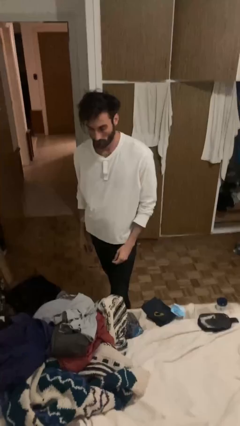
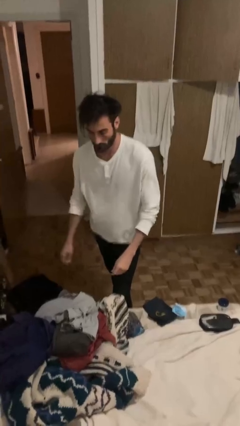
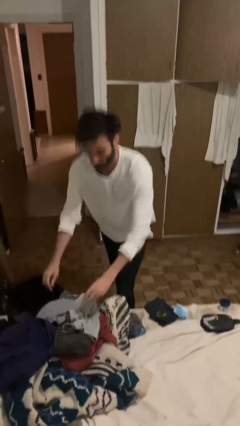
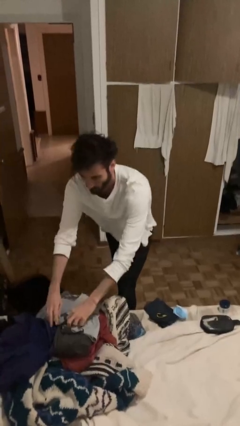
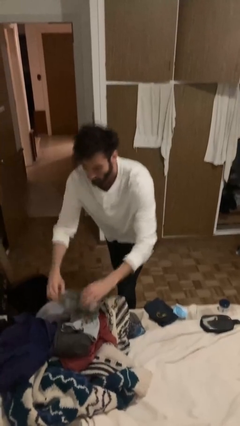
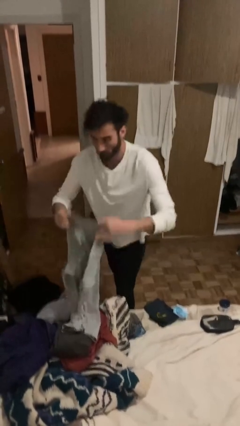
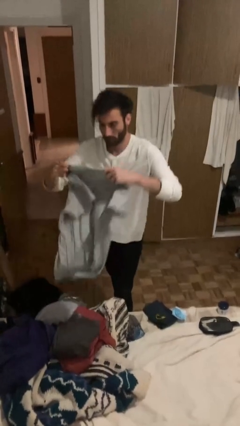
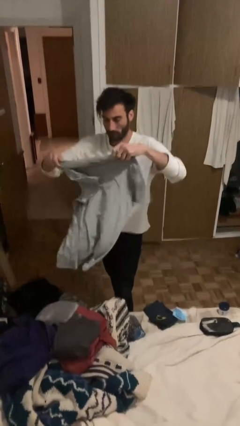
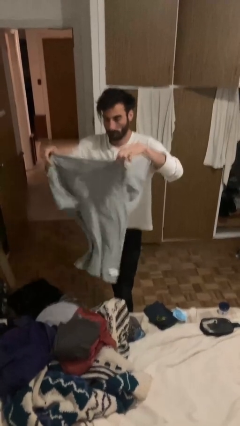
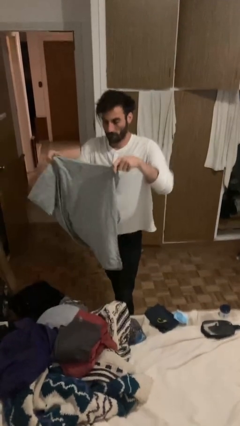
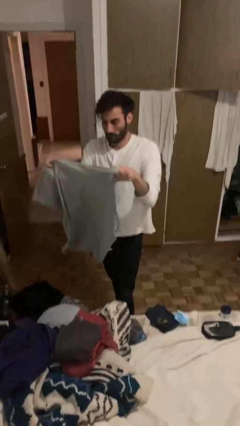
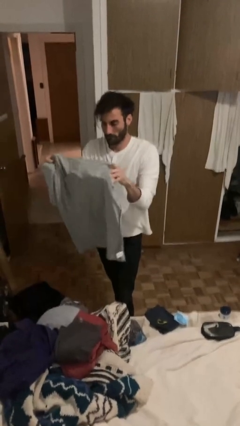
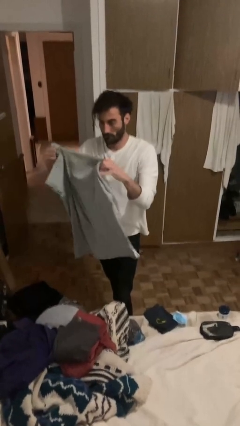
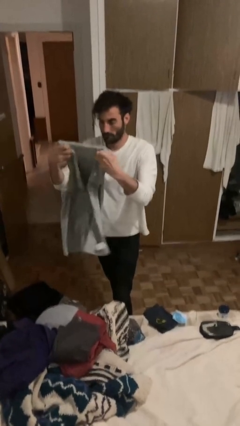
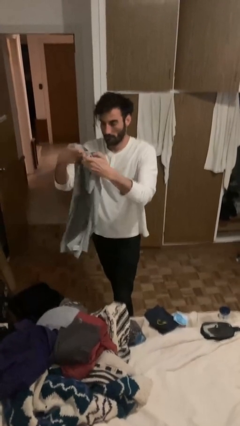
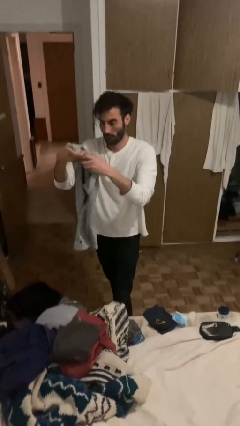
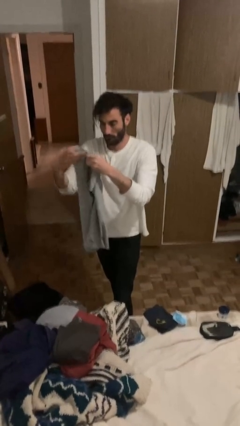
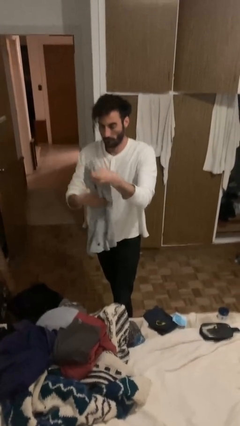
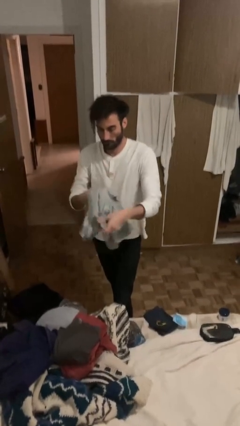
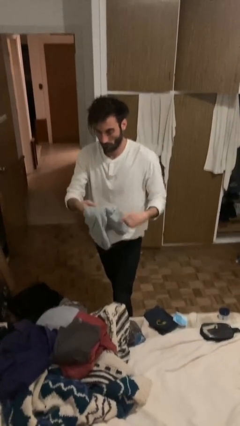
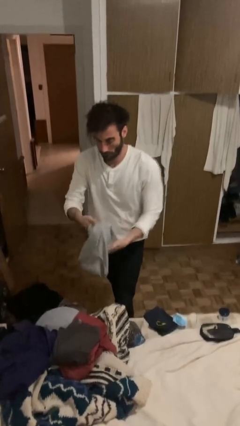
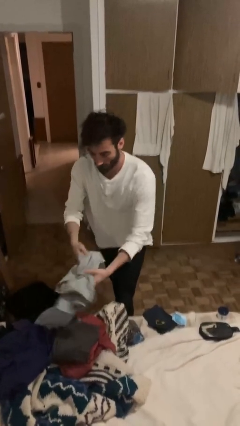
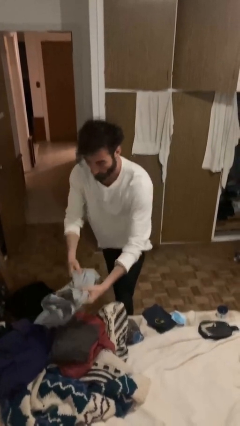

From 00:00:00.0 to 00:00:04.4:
person folds shirt

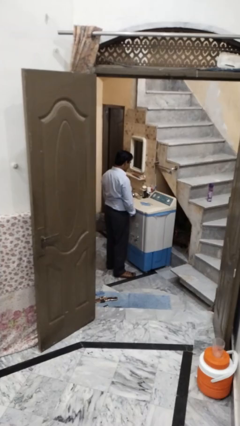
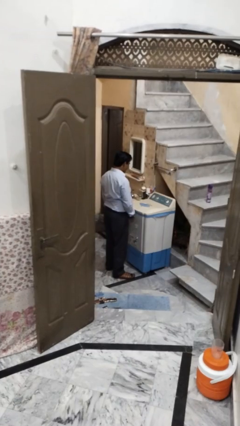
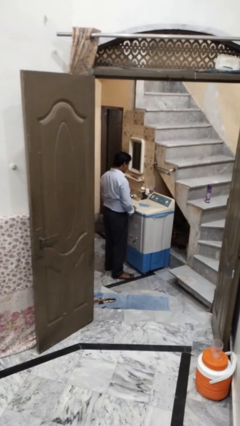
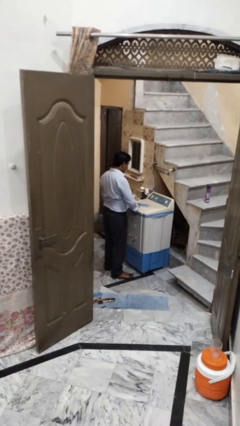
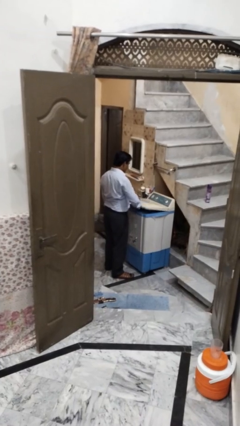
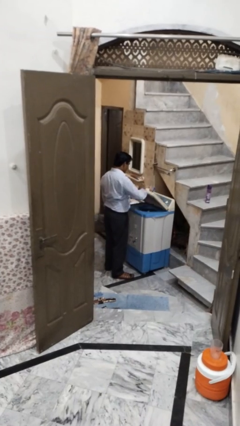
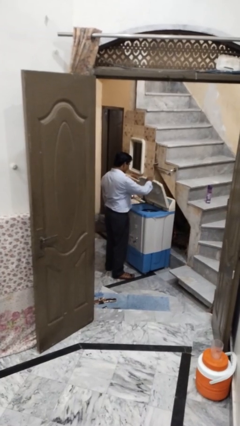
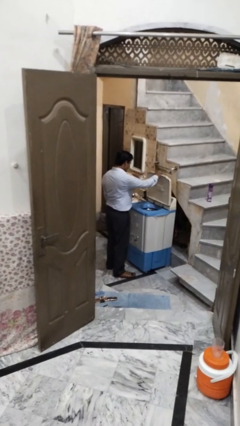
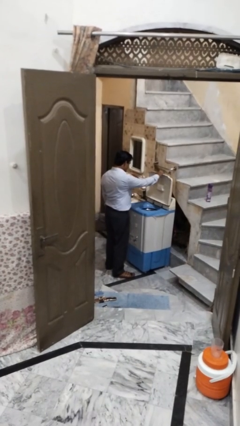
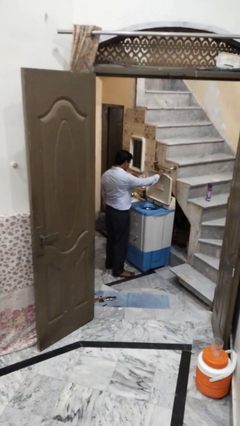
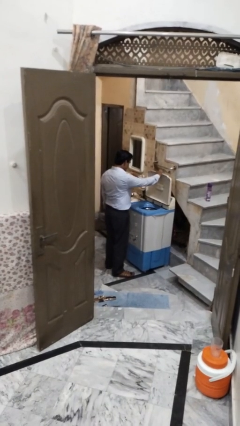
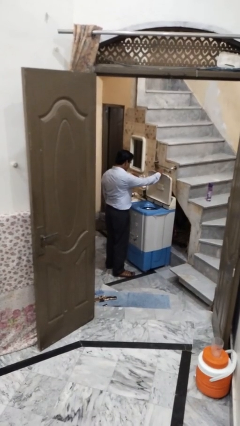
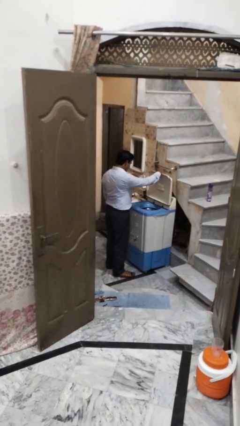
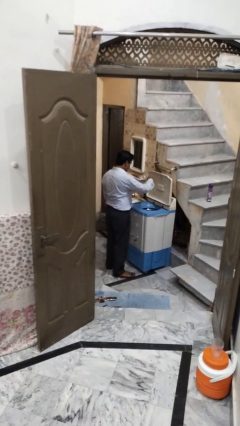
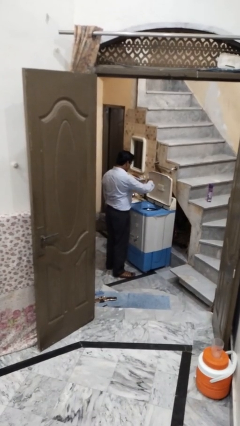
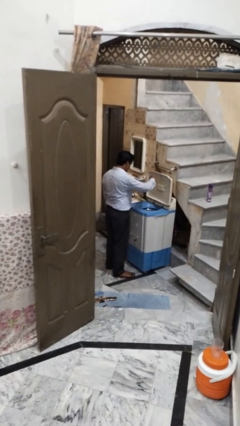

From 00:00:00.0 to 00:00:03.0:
person opens clothes washer

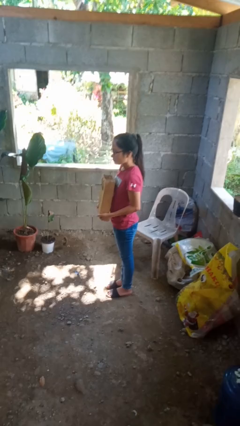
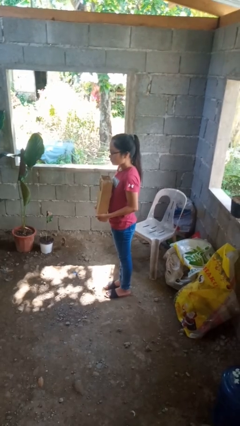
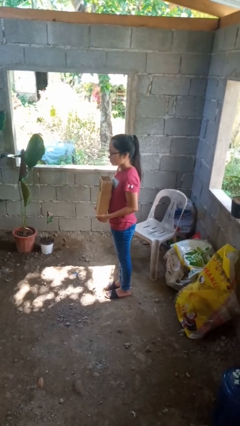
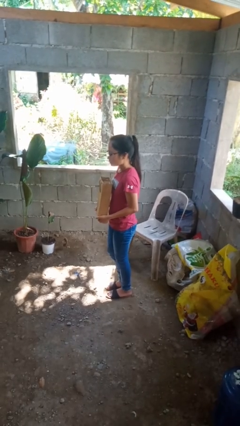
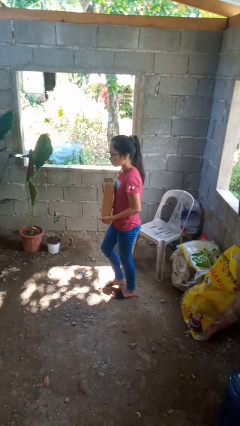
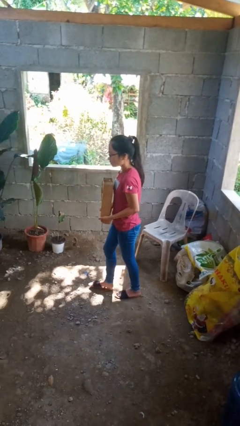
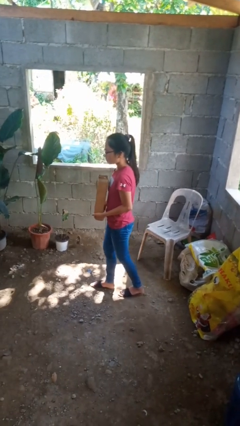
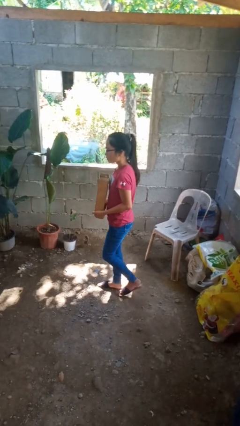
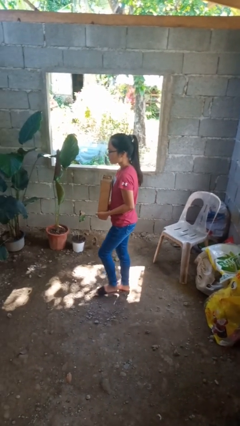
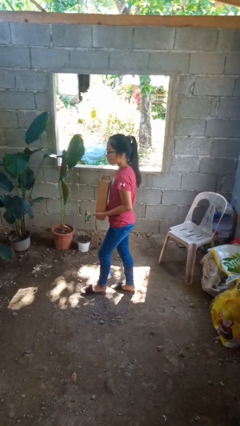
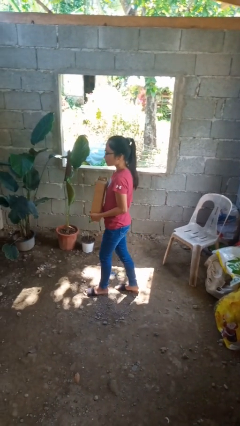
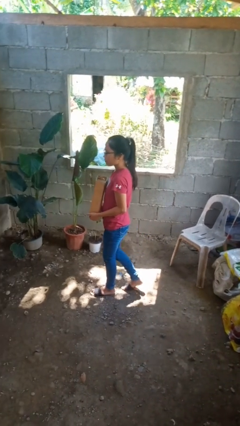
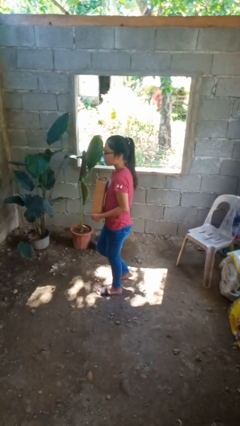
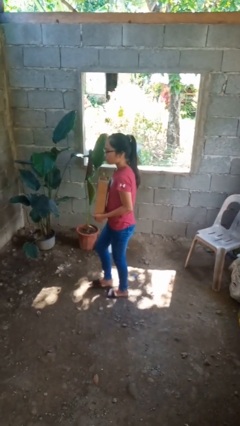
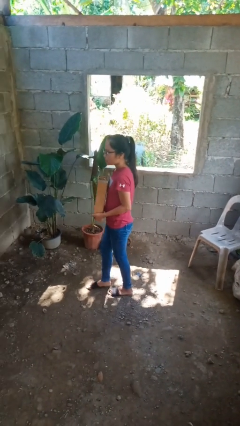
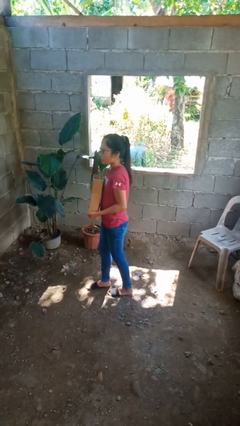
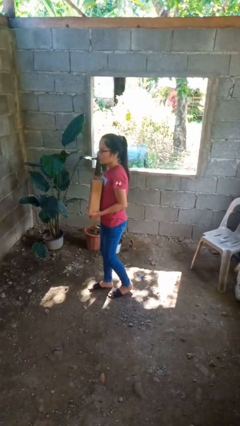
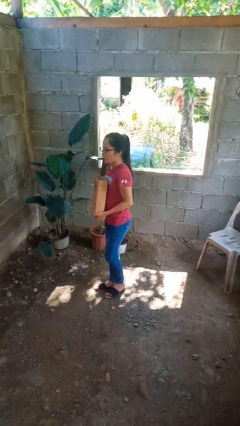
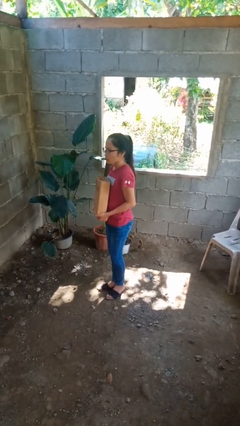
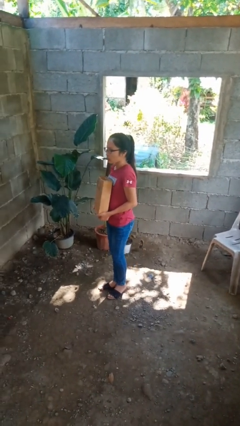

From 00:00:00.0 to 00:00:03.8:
person carries groceries

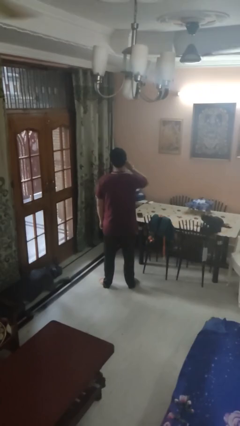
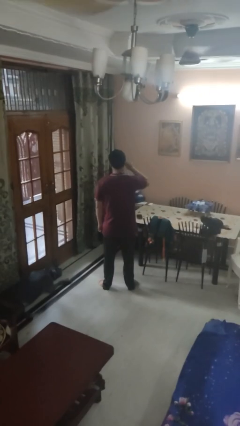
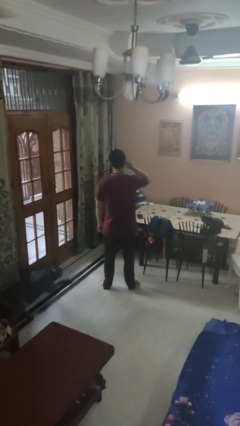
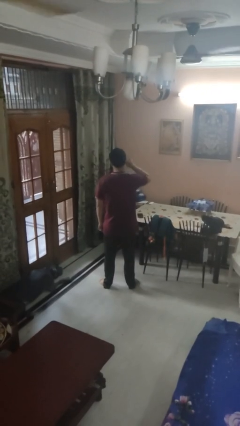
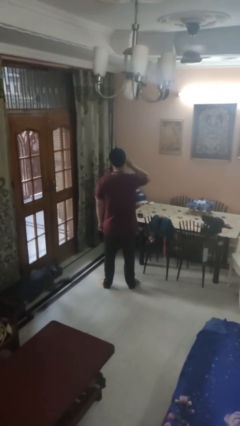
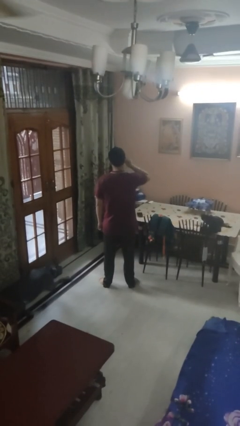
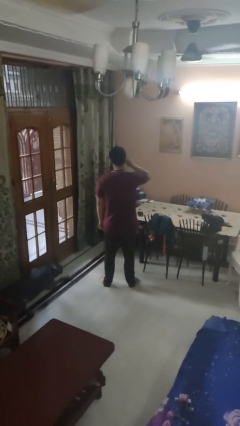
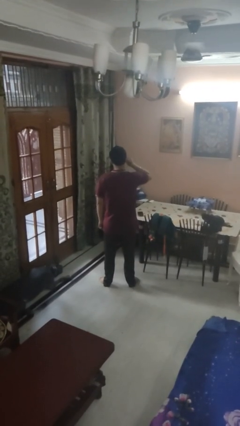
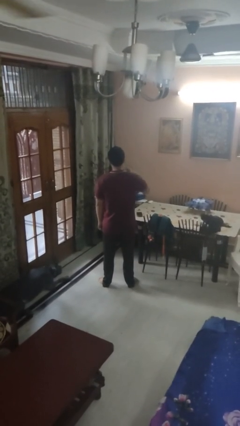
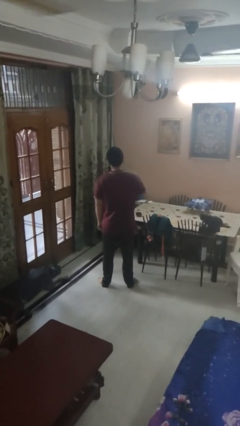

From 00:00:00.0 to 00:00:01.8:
person touches earlobe

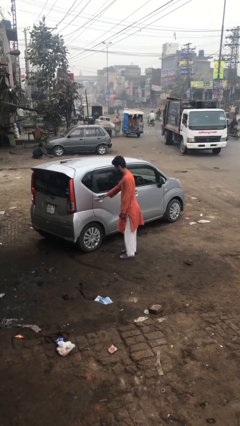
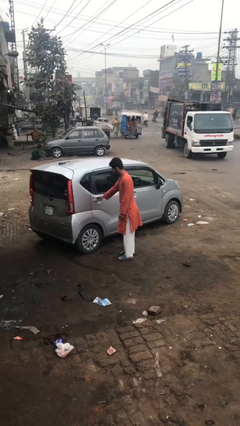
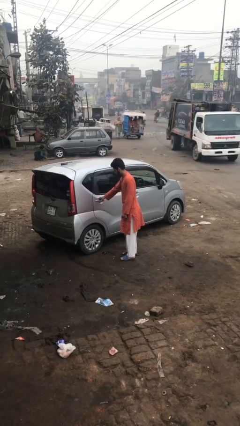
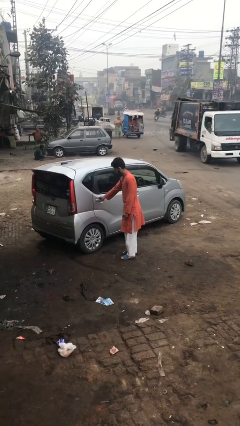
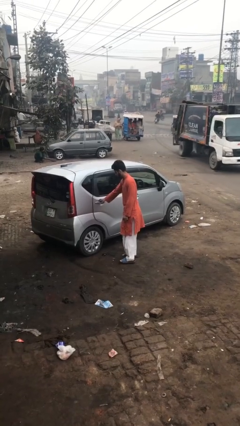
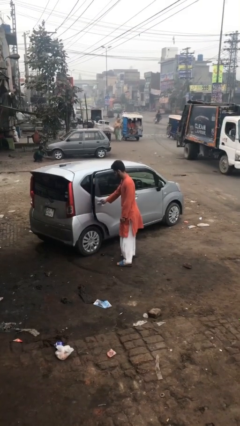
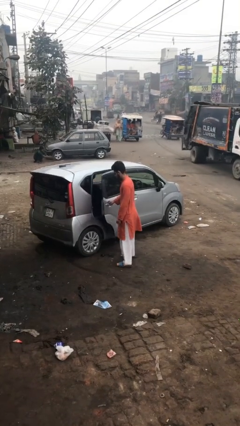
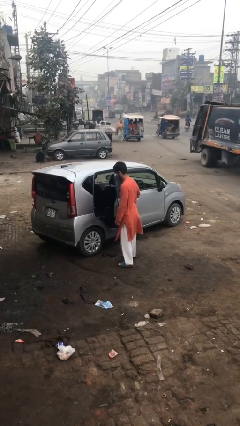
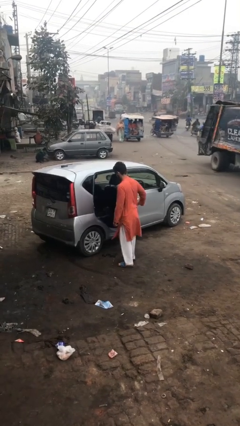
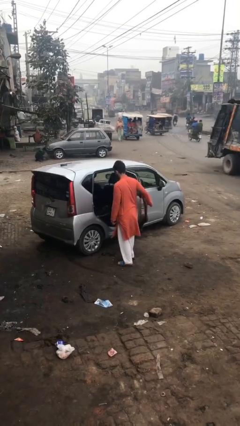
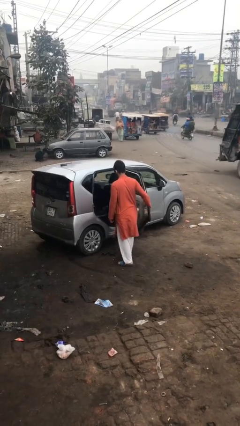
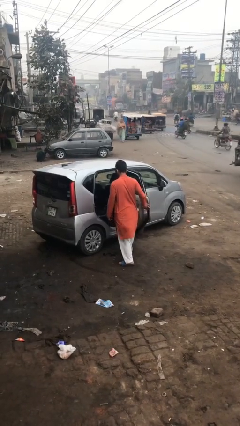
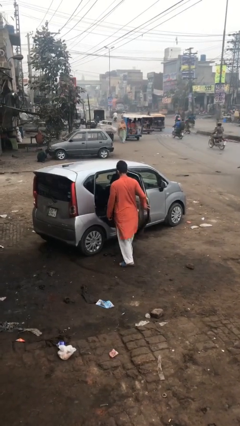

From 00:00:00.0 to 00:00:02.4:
person opens car door

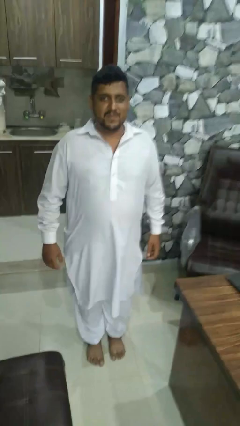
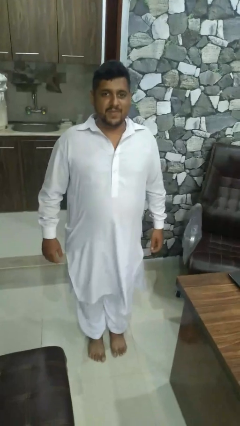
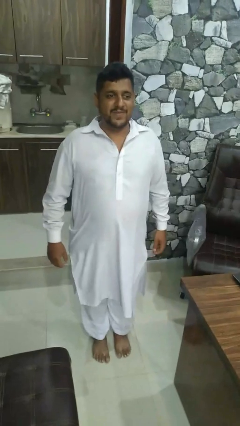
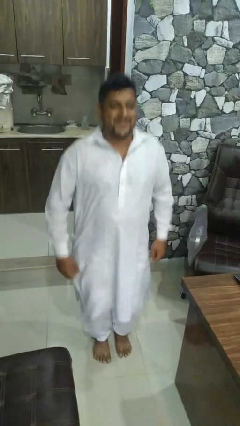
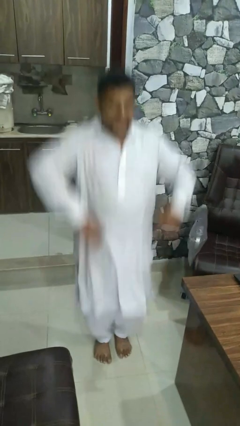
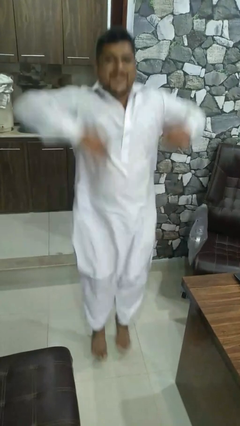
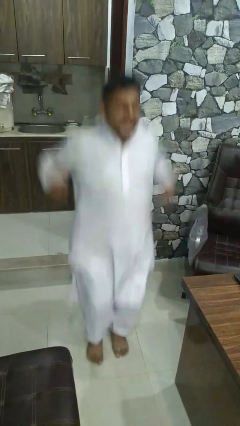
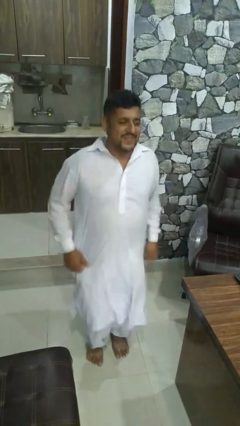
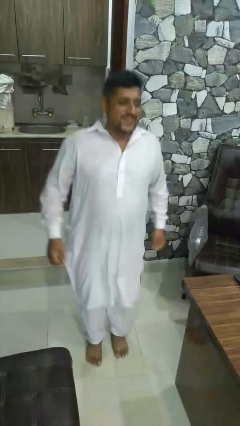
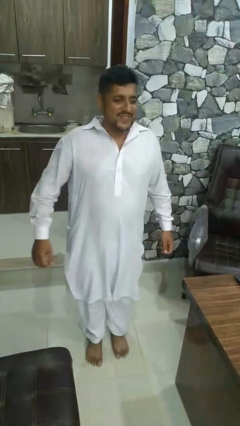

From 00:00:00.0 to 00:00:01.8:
person jumps
